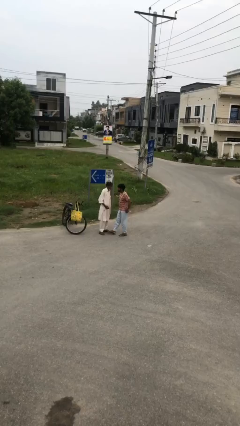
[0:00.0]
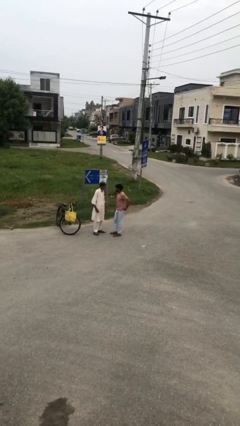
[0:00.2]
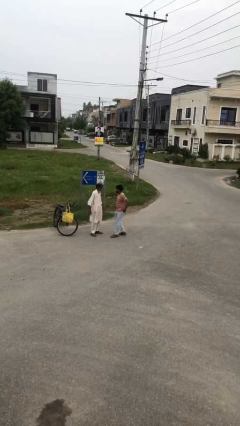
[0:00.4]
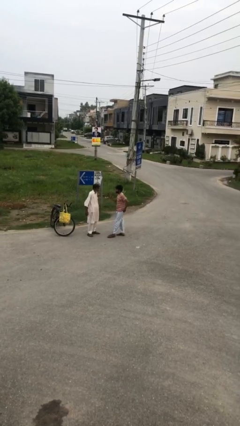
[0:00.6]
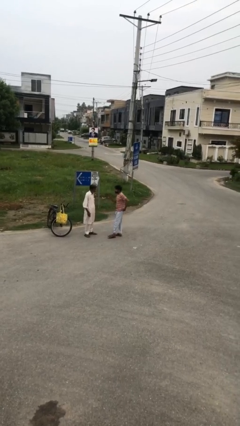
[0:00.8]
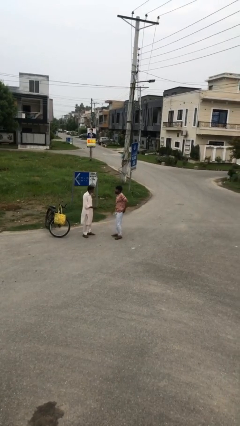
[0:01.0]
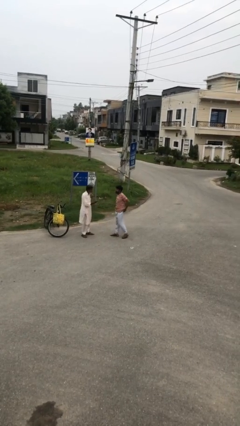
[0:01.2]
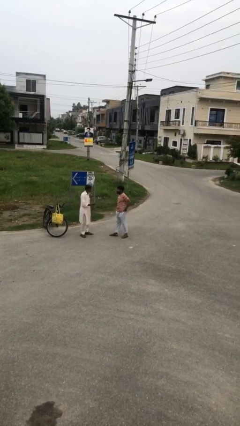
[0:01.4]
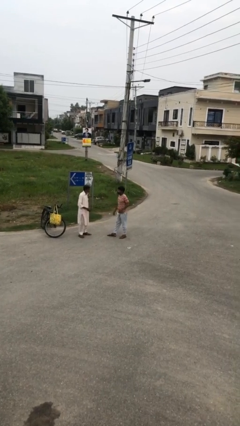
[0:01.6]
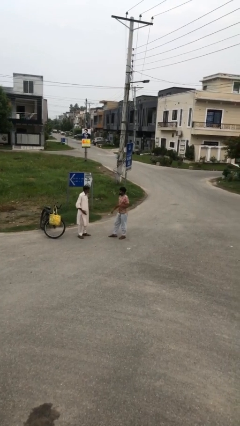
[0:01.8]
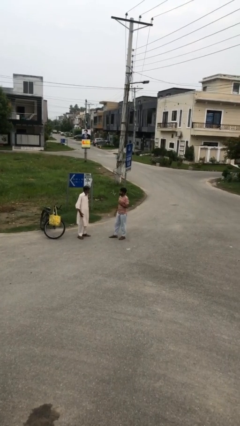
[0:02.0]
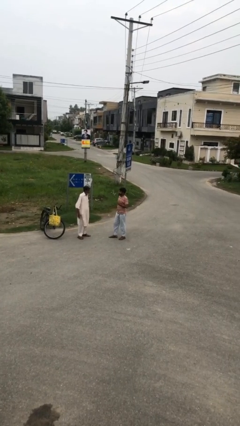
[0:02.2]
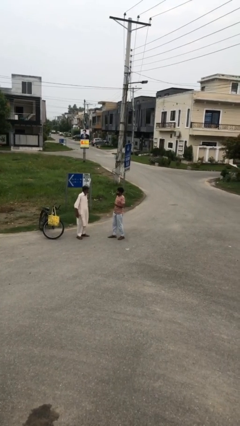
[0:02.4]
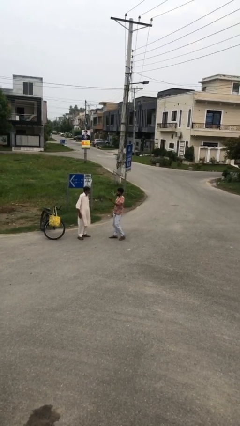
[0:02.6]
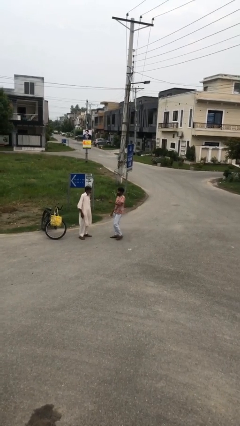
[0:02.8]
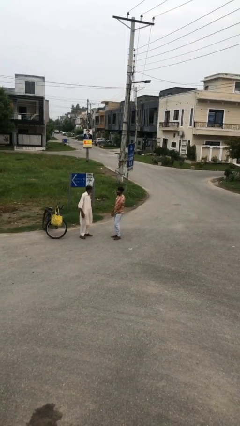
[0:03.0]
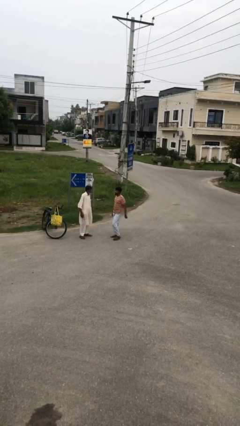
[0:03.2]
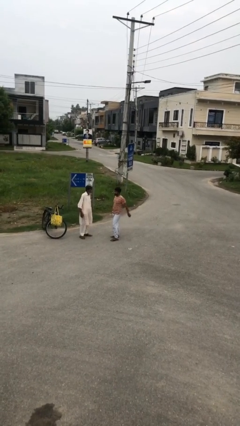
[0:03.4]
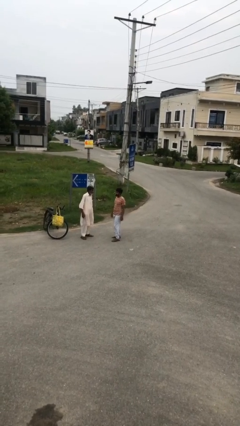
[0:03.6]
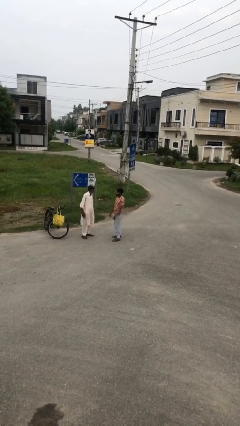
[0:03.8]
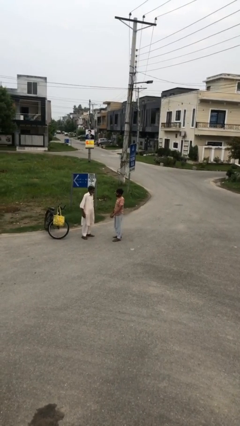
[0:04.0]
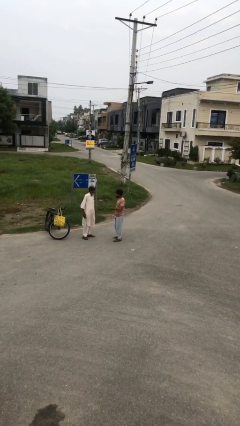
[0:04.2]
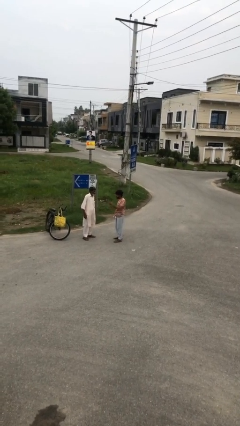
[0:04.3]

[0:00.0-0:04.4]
person talks to person

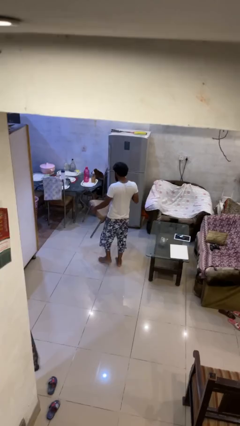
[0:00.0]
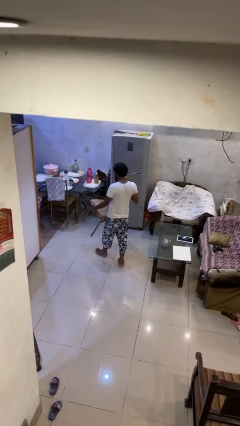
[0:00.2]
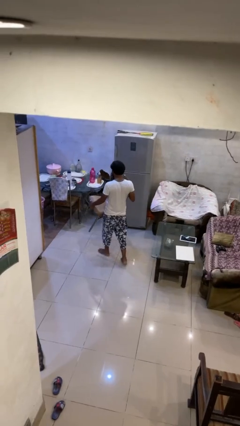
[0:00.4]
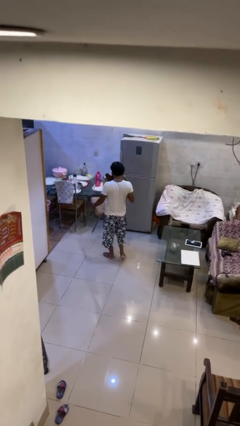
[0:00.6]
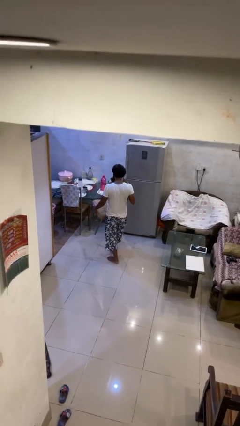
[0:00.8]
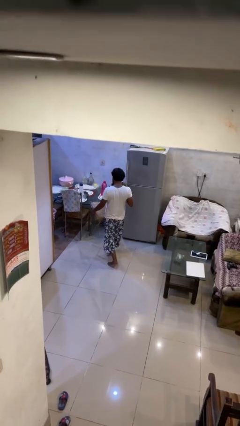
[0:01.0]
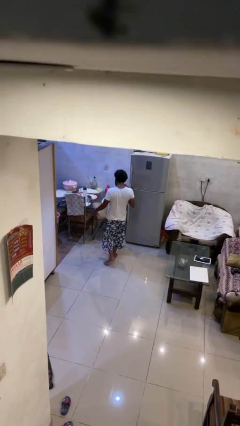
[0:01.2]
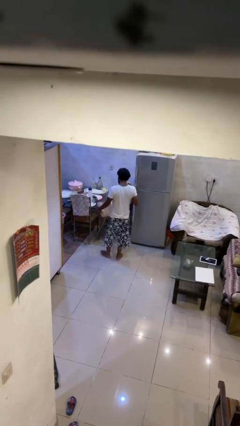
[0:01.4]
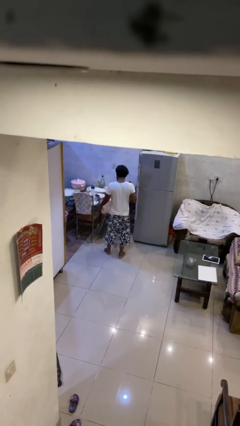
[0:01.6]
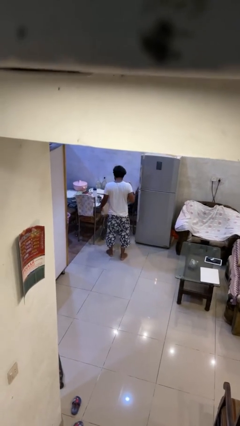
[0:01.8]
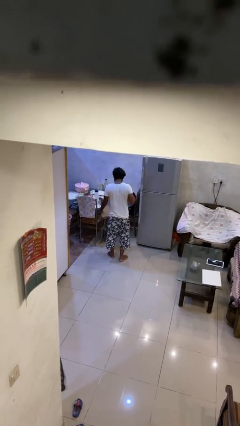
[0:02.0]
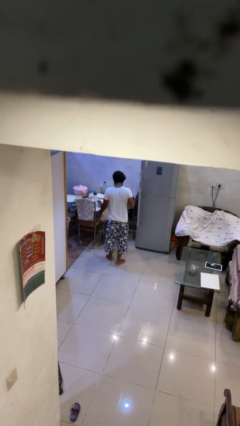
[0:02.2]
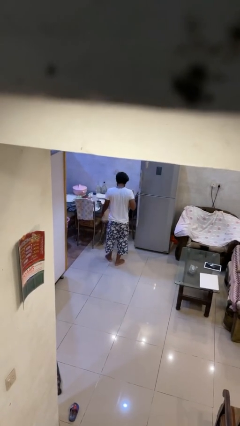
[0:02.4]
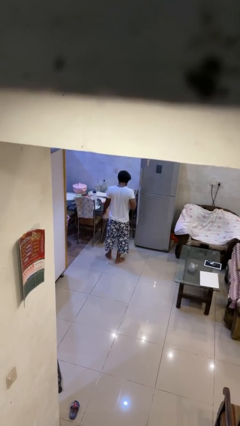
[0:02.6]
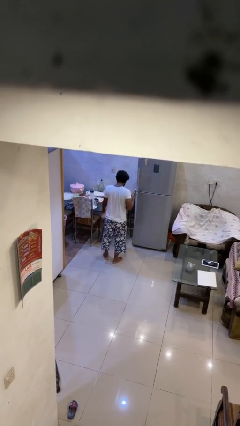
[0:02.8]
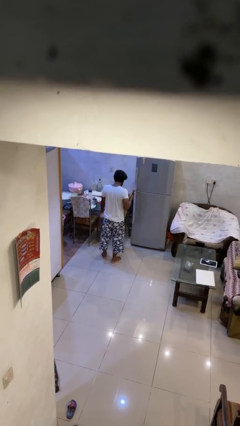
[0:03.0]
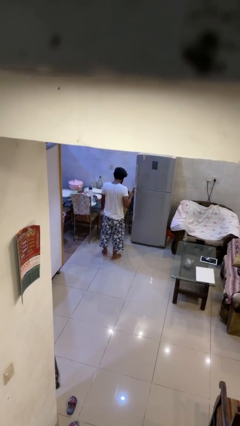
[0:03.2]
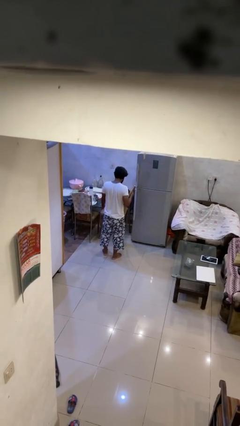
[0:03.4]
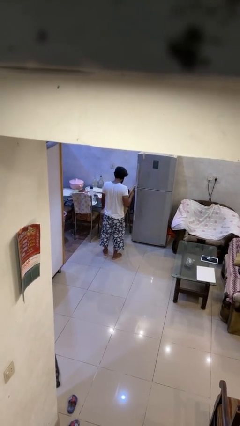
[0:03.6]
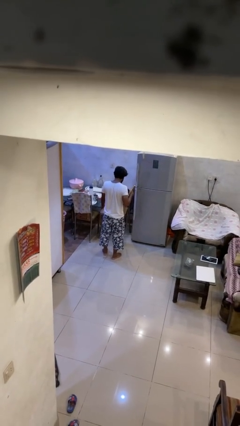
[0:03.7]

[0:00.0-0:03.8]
person carries furniture

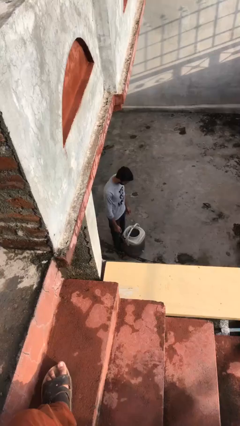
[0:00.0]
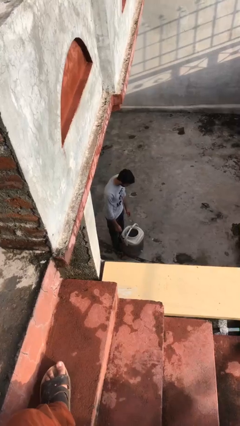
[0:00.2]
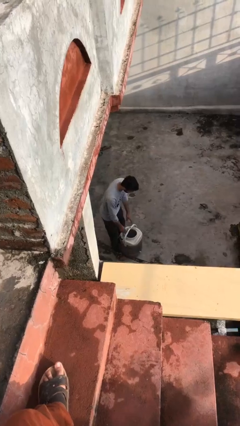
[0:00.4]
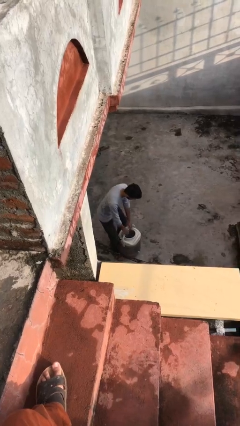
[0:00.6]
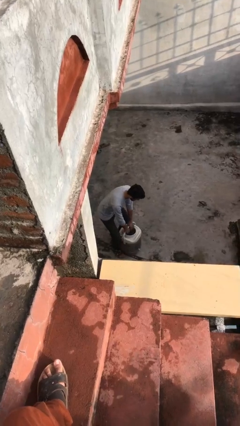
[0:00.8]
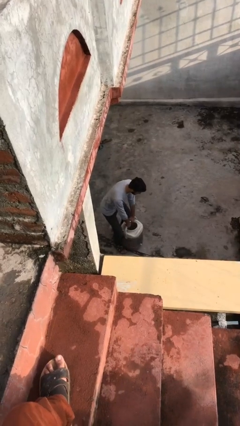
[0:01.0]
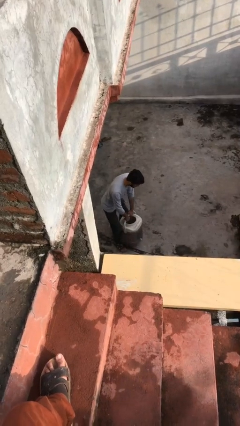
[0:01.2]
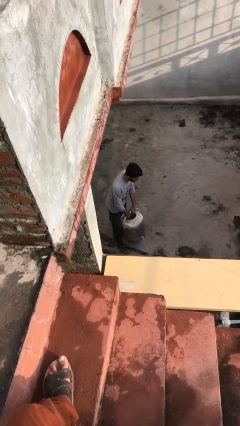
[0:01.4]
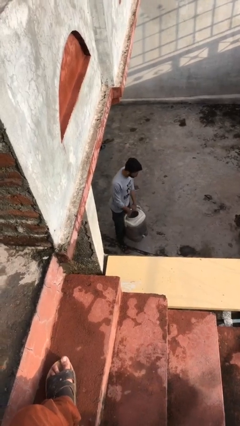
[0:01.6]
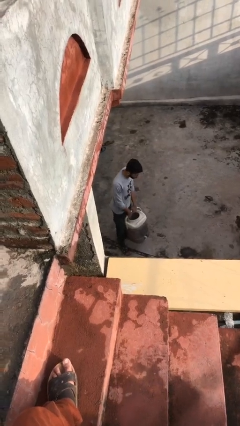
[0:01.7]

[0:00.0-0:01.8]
person picks up object from floor

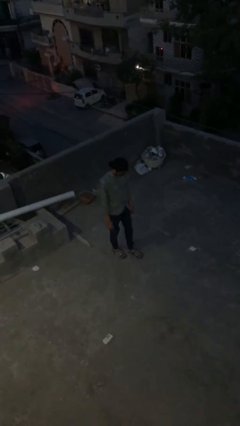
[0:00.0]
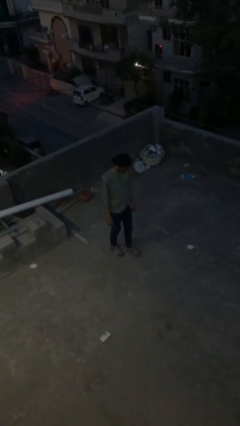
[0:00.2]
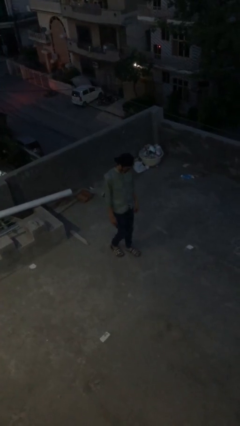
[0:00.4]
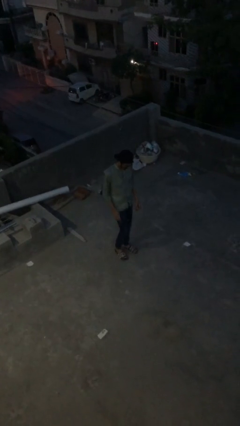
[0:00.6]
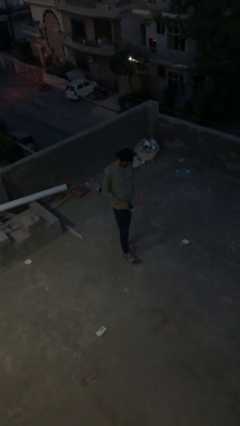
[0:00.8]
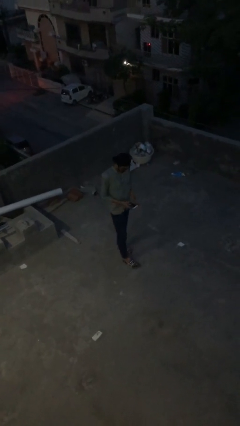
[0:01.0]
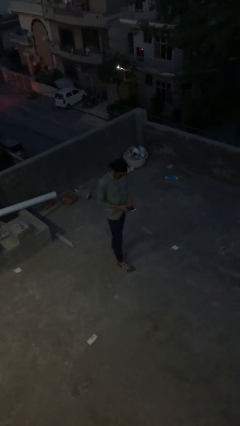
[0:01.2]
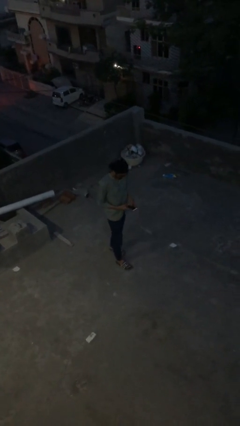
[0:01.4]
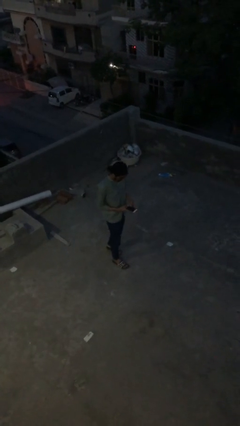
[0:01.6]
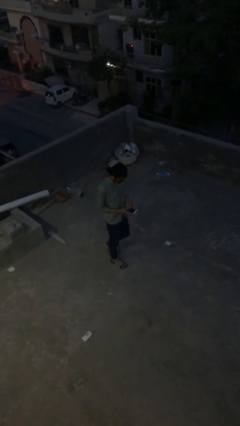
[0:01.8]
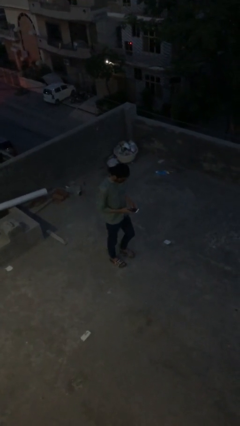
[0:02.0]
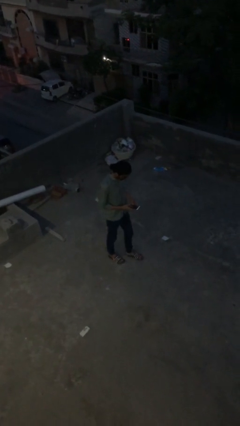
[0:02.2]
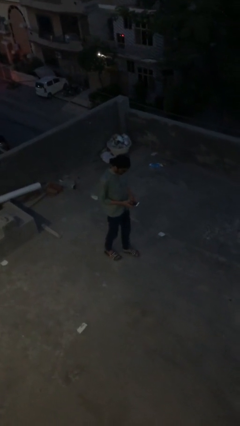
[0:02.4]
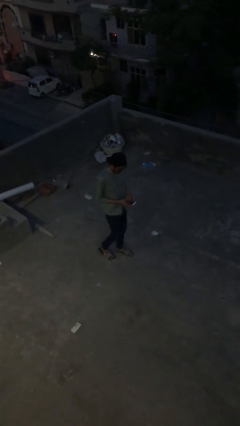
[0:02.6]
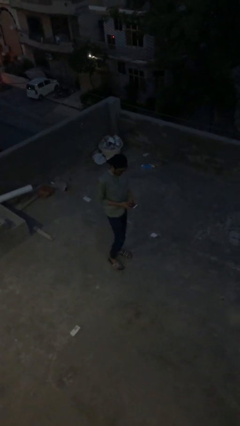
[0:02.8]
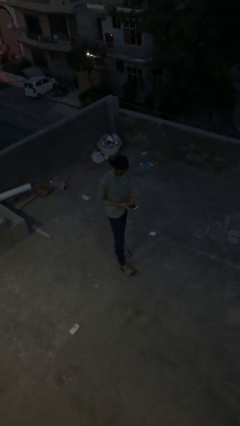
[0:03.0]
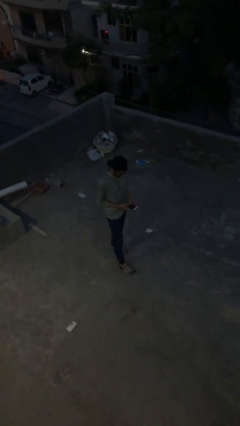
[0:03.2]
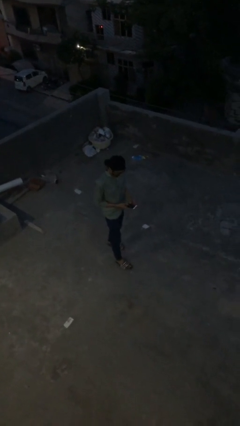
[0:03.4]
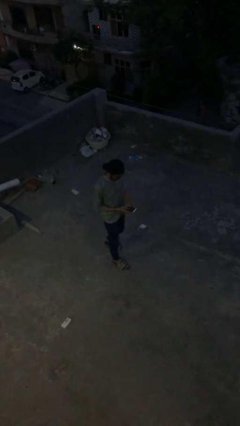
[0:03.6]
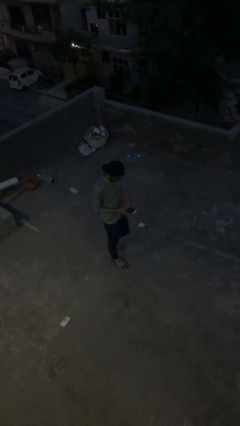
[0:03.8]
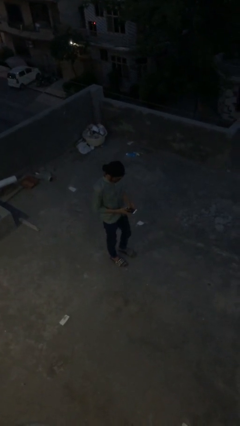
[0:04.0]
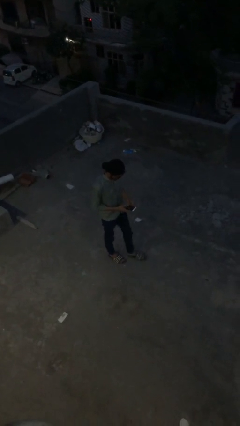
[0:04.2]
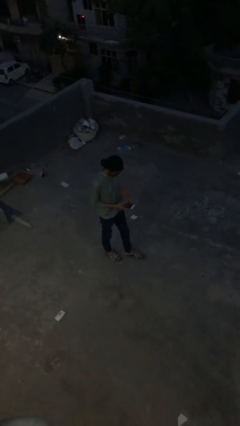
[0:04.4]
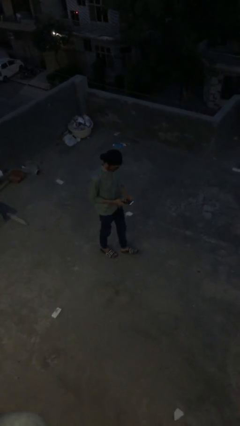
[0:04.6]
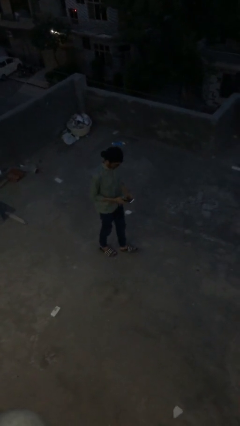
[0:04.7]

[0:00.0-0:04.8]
person texts on phone

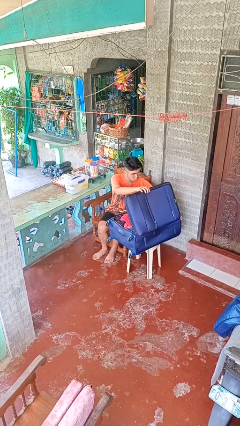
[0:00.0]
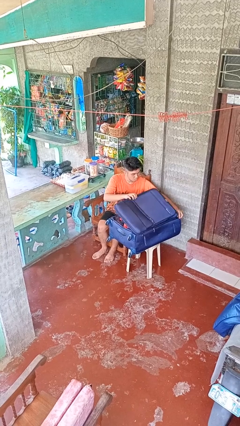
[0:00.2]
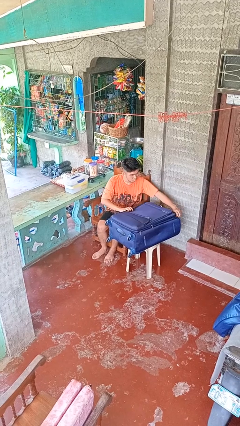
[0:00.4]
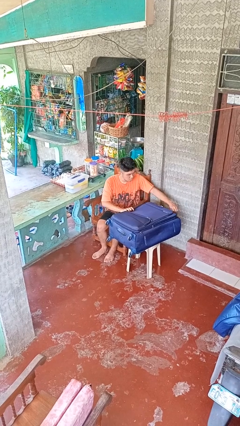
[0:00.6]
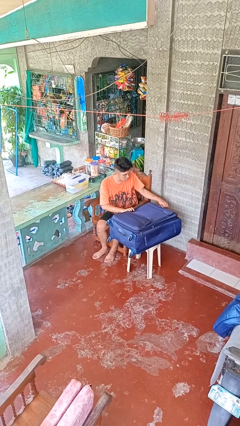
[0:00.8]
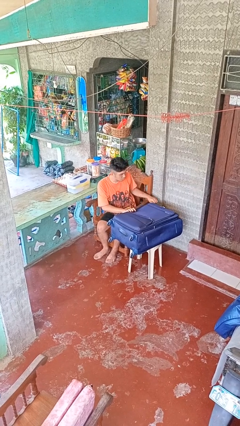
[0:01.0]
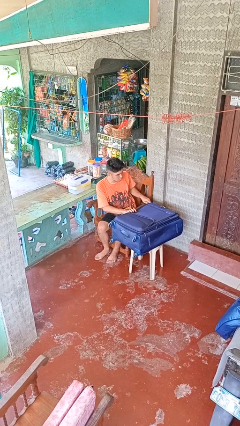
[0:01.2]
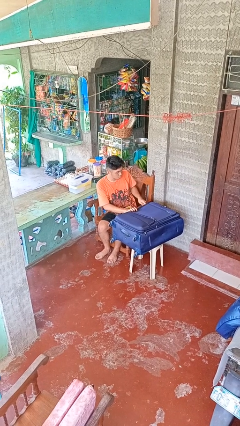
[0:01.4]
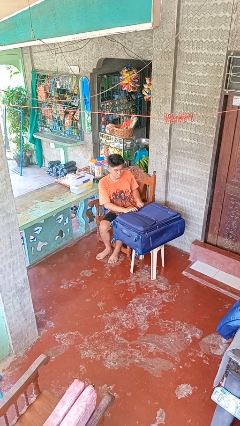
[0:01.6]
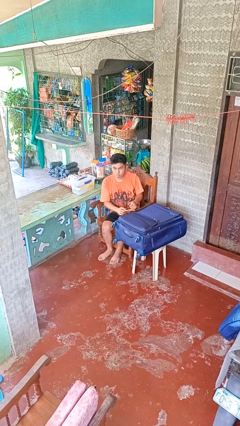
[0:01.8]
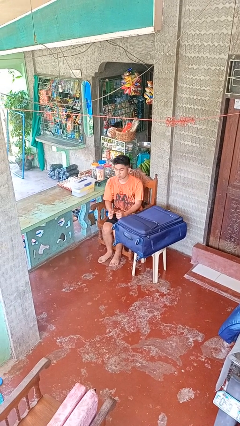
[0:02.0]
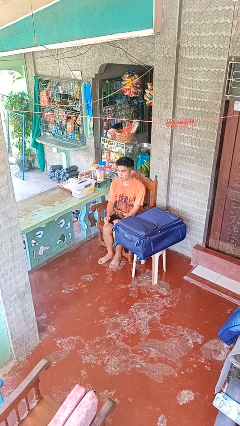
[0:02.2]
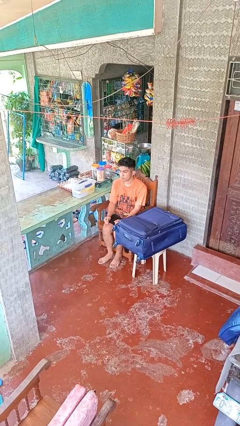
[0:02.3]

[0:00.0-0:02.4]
person closes suitcase

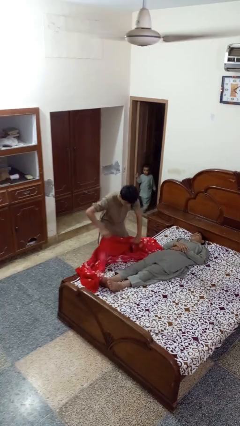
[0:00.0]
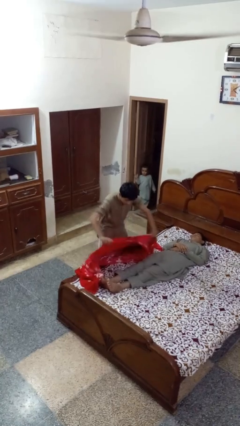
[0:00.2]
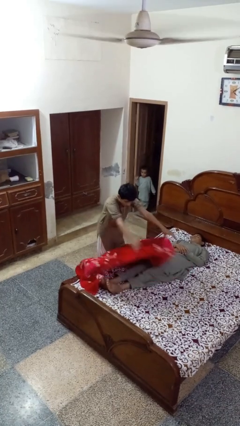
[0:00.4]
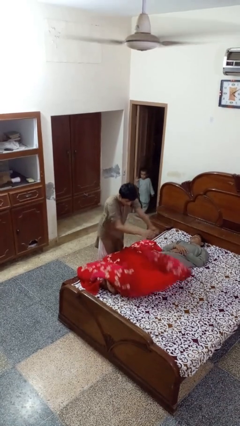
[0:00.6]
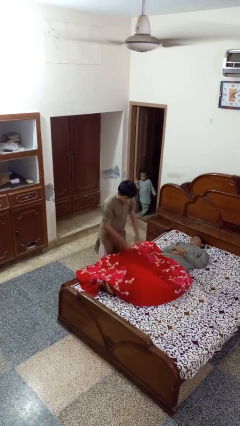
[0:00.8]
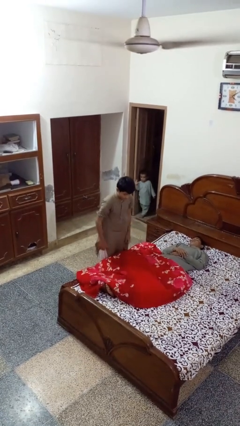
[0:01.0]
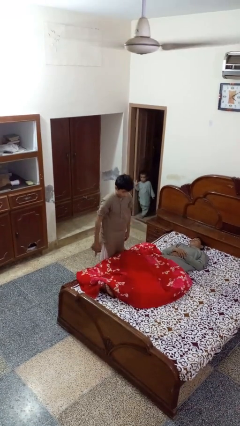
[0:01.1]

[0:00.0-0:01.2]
person covers friend with blanket
